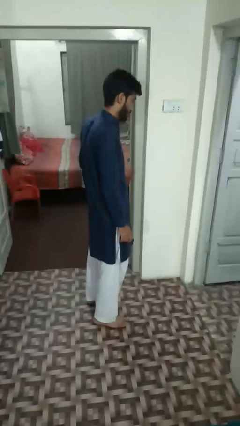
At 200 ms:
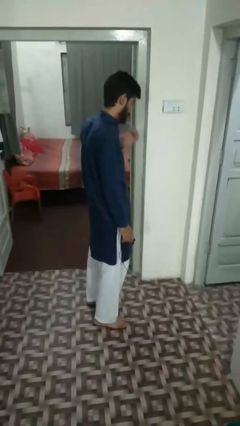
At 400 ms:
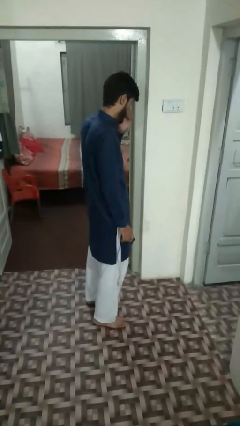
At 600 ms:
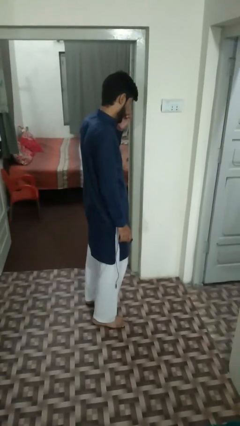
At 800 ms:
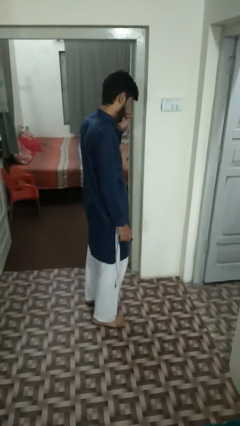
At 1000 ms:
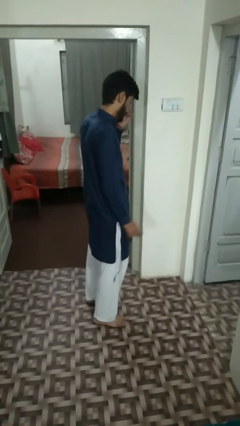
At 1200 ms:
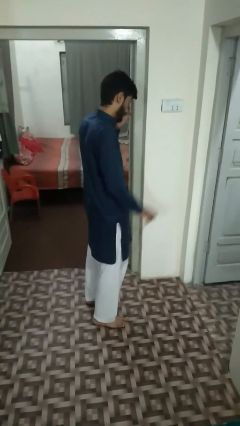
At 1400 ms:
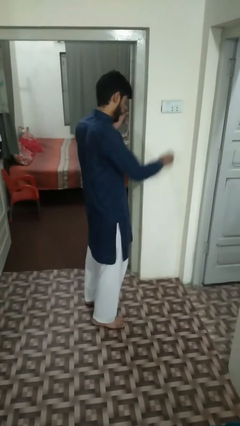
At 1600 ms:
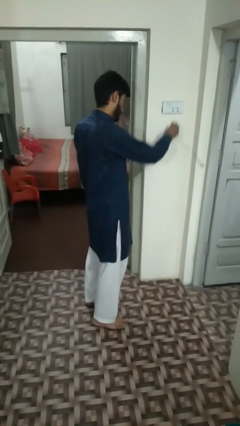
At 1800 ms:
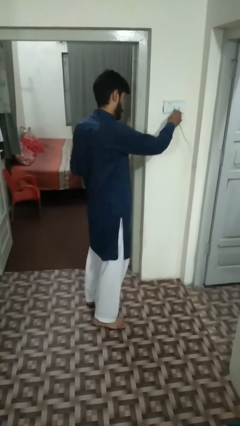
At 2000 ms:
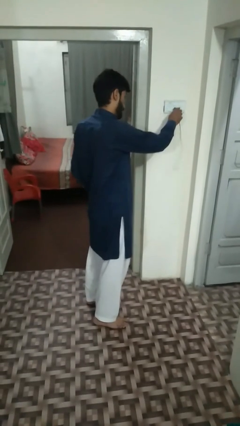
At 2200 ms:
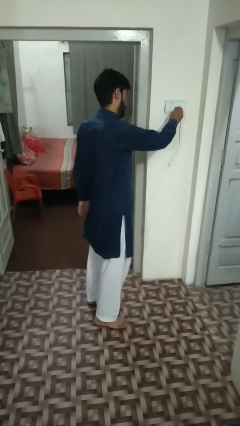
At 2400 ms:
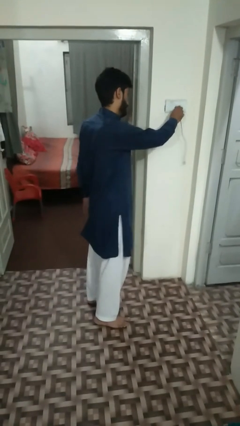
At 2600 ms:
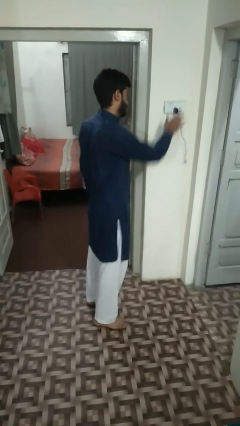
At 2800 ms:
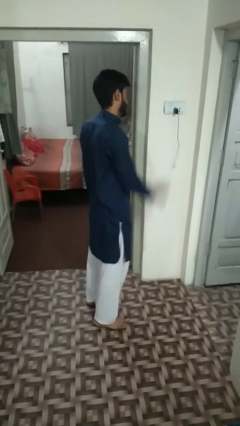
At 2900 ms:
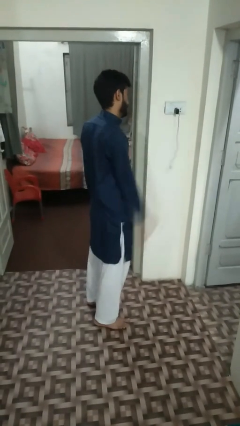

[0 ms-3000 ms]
person plugs into electrical socket

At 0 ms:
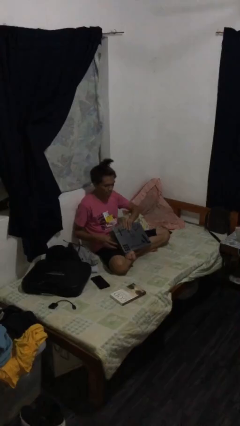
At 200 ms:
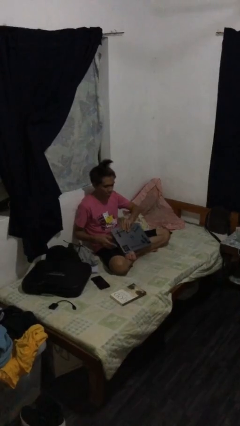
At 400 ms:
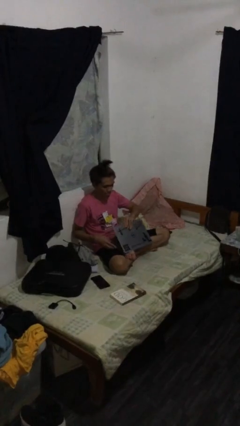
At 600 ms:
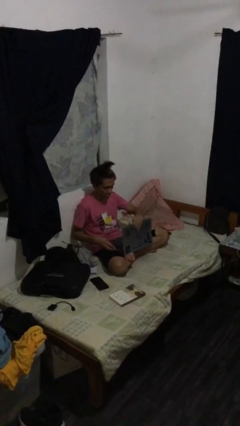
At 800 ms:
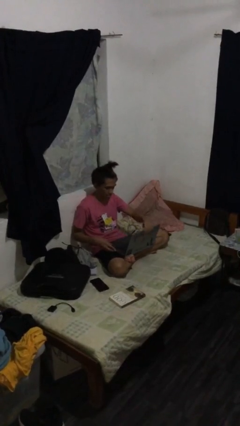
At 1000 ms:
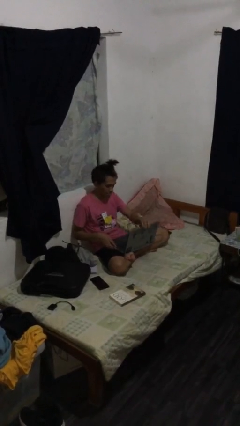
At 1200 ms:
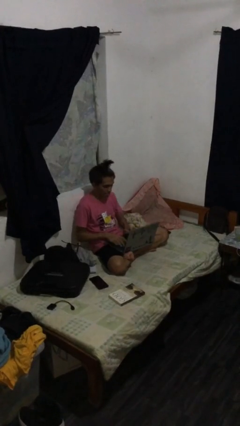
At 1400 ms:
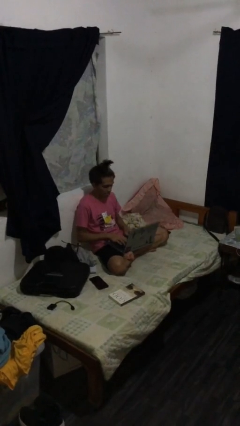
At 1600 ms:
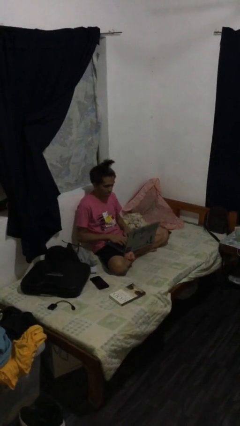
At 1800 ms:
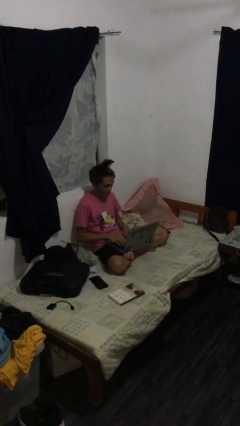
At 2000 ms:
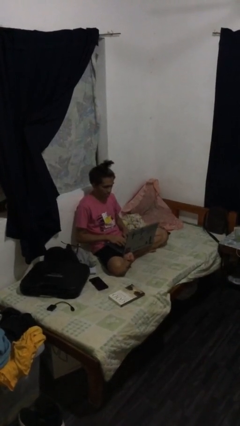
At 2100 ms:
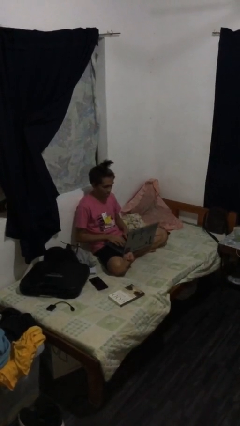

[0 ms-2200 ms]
person interacts with laptop

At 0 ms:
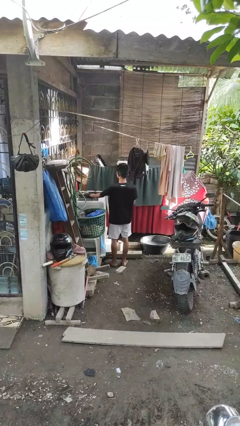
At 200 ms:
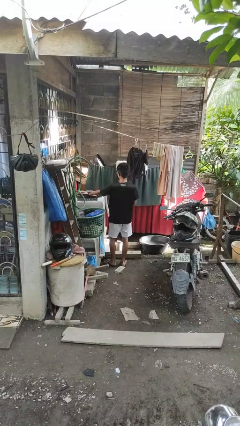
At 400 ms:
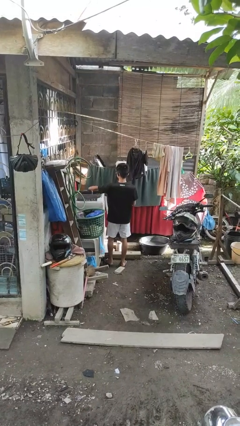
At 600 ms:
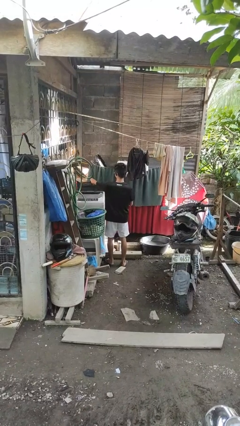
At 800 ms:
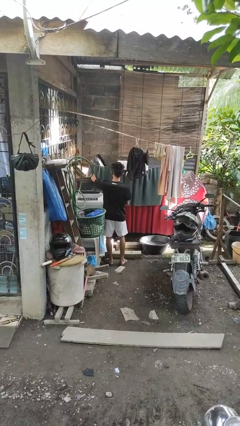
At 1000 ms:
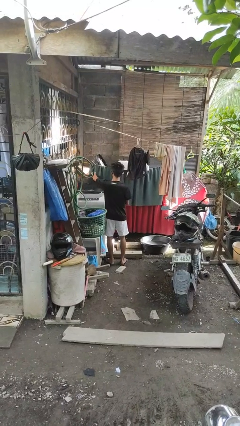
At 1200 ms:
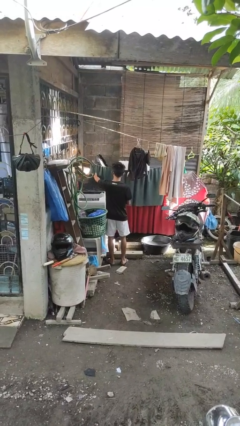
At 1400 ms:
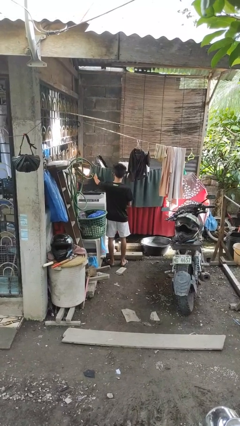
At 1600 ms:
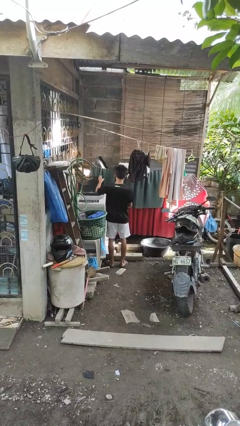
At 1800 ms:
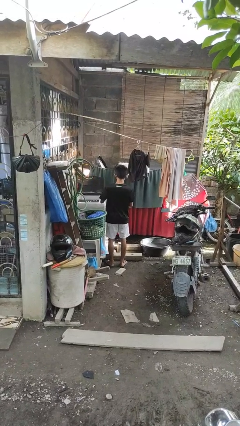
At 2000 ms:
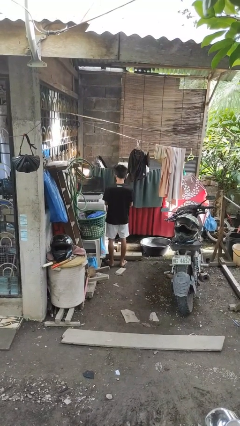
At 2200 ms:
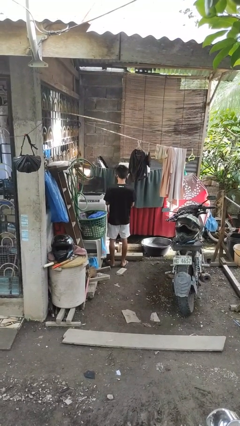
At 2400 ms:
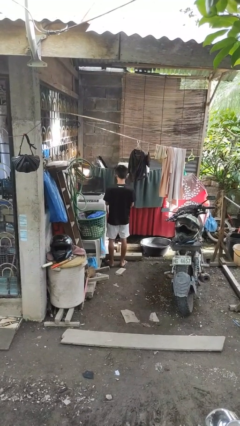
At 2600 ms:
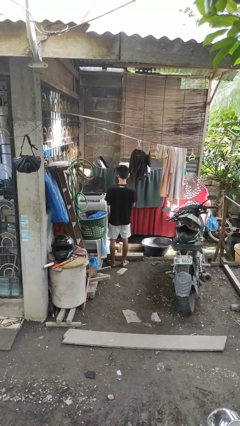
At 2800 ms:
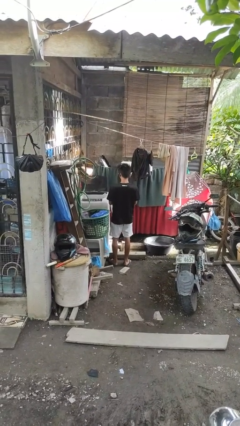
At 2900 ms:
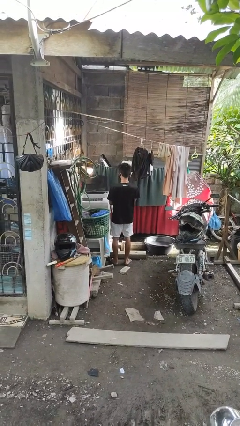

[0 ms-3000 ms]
person opens clothes washer

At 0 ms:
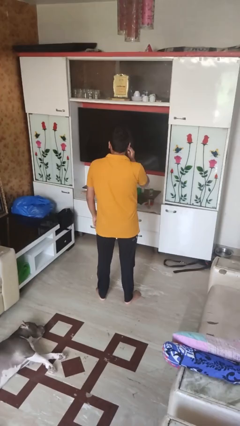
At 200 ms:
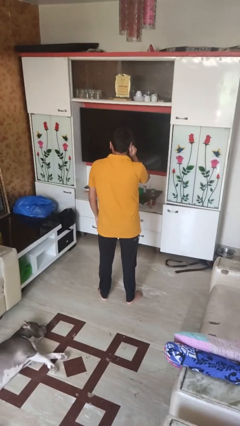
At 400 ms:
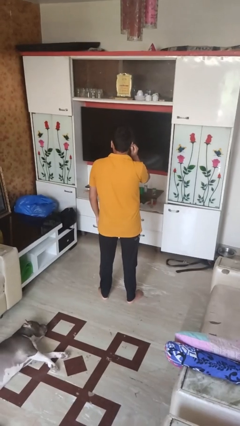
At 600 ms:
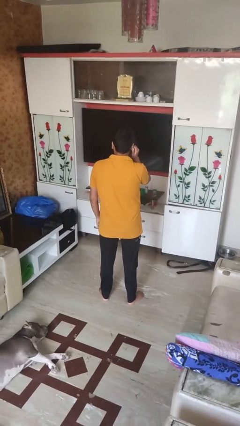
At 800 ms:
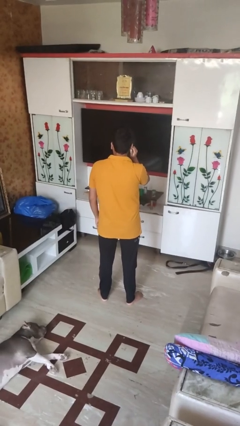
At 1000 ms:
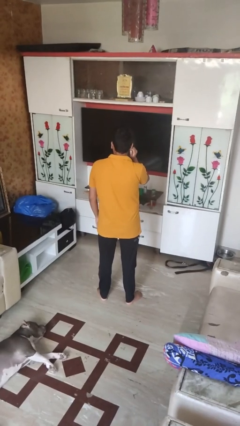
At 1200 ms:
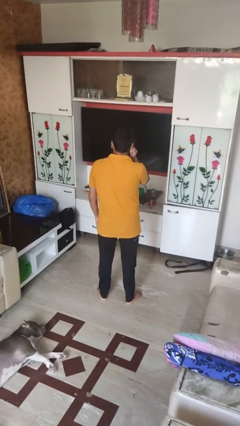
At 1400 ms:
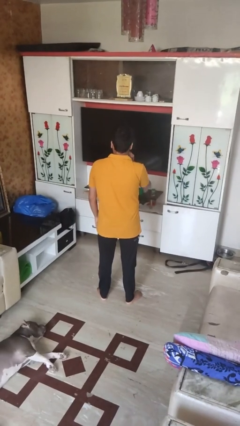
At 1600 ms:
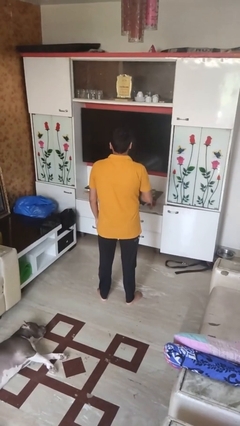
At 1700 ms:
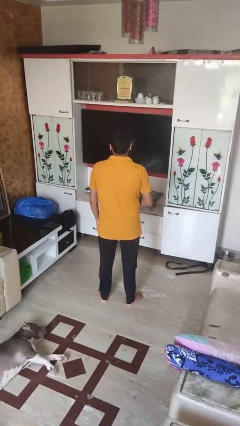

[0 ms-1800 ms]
person touches earlobe

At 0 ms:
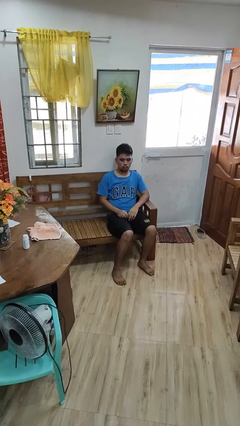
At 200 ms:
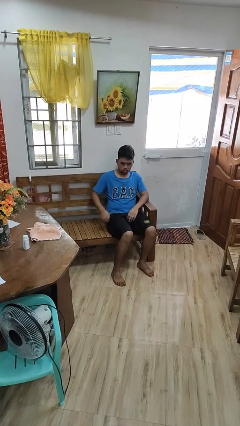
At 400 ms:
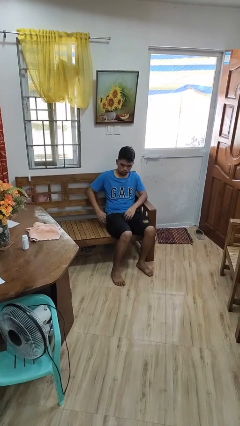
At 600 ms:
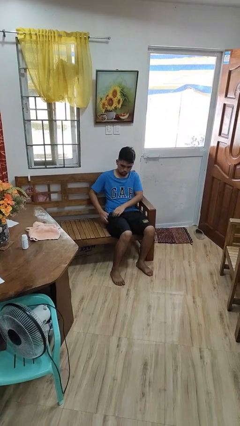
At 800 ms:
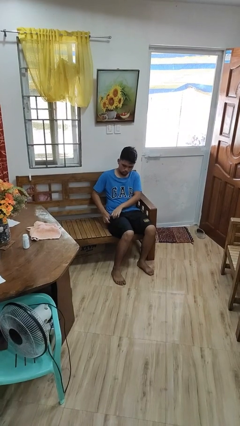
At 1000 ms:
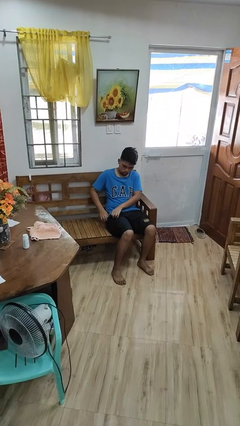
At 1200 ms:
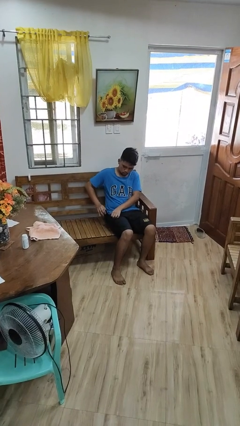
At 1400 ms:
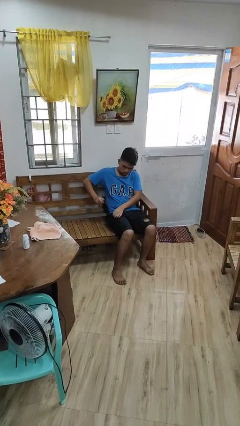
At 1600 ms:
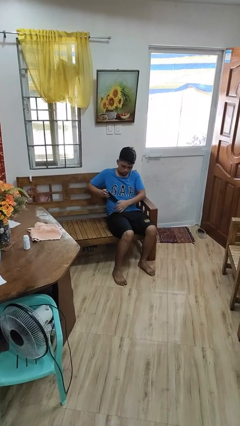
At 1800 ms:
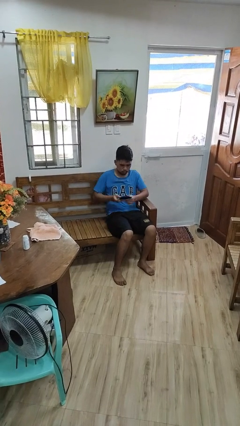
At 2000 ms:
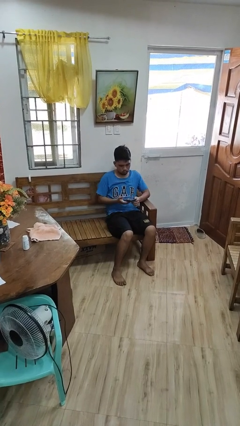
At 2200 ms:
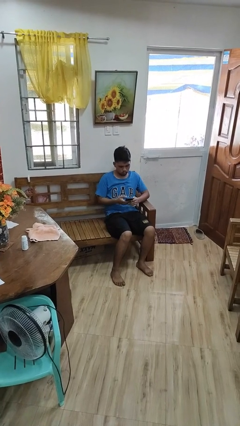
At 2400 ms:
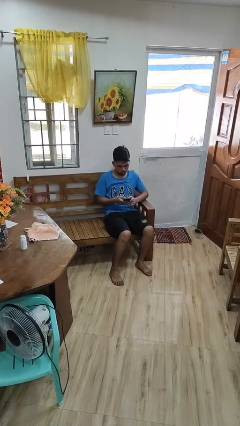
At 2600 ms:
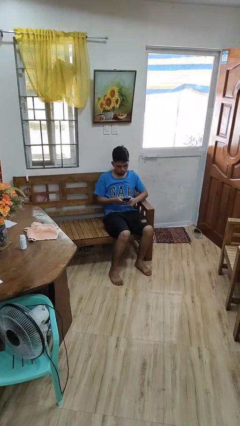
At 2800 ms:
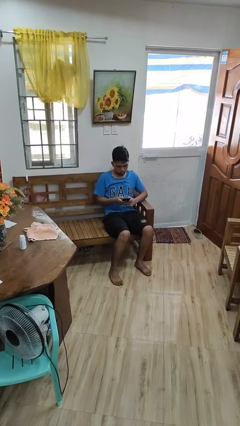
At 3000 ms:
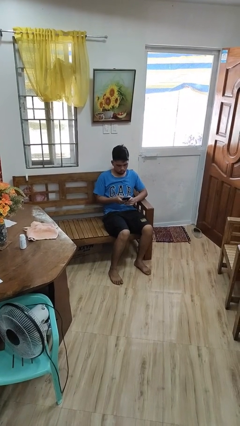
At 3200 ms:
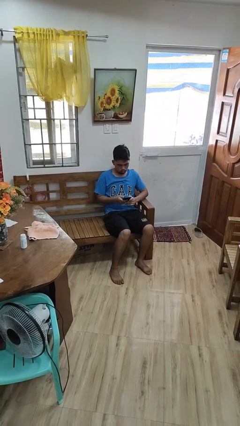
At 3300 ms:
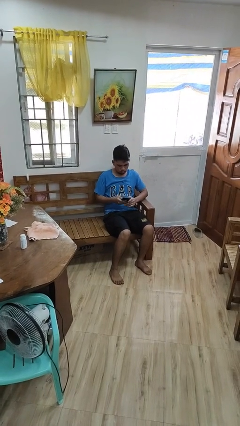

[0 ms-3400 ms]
person takes phone from pocket

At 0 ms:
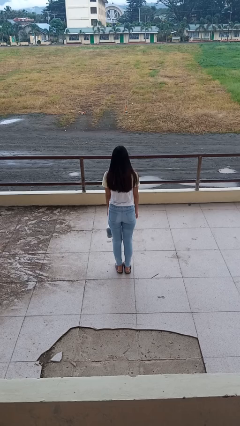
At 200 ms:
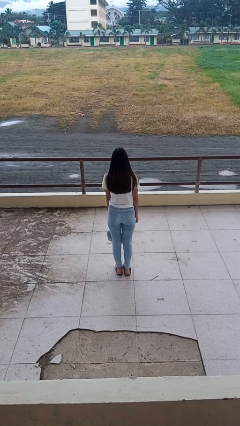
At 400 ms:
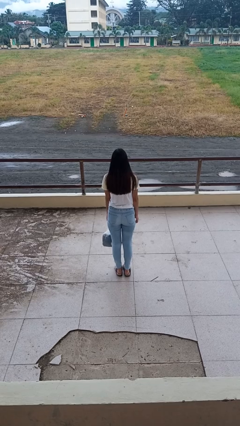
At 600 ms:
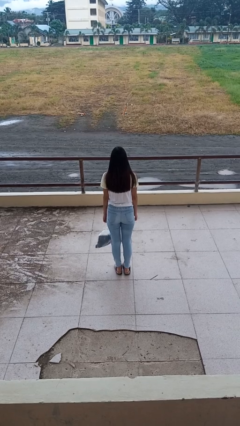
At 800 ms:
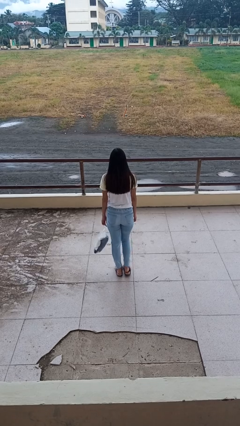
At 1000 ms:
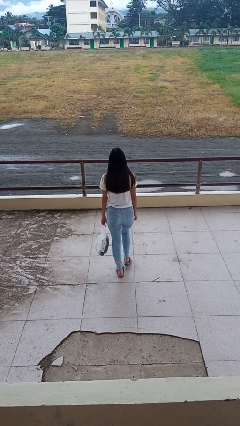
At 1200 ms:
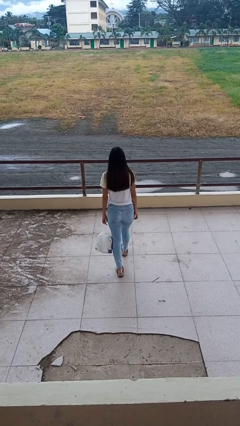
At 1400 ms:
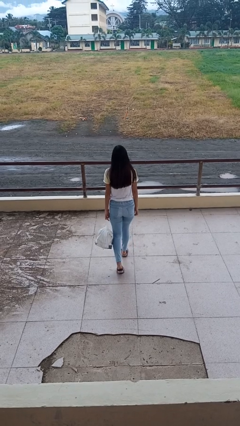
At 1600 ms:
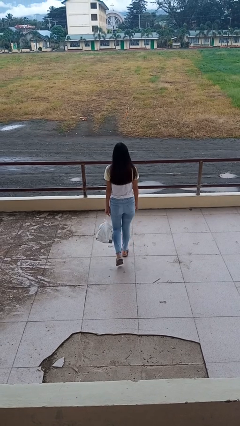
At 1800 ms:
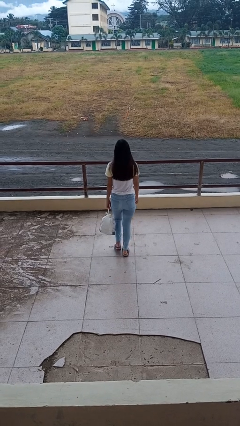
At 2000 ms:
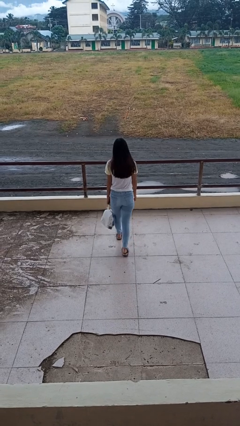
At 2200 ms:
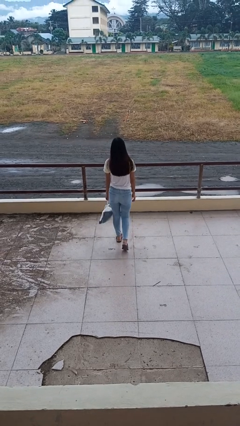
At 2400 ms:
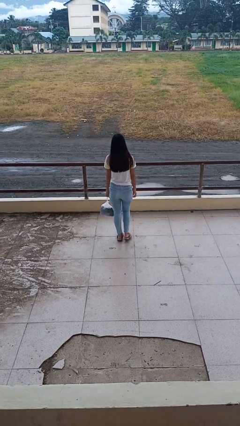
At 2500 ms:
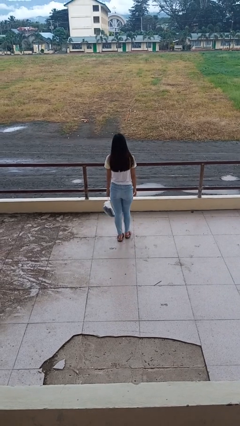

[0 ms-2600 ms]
person carries groceries

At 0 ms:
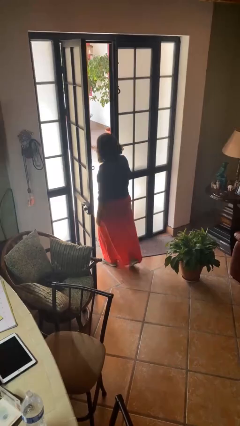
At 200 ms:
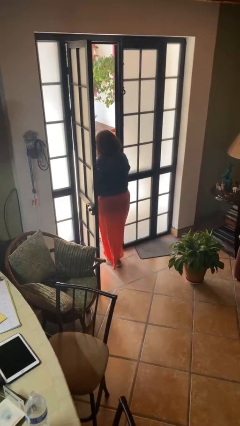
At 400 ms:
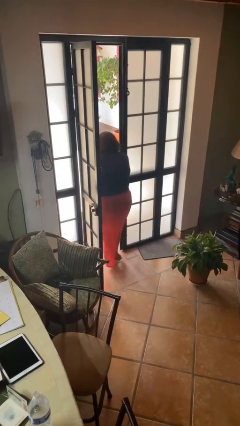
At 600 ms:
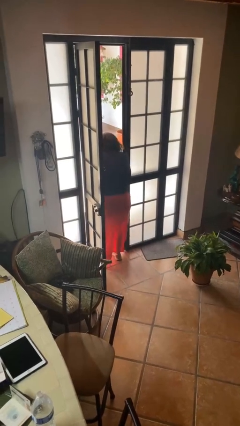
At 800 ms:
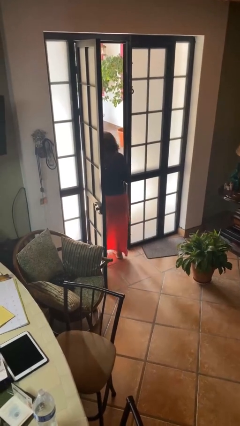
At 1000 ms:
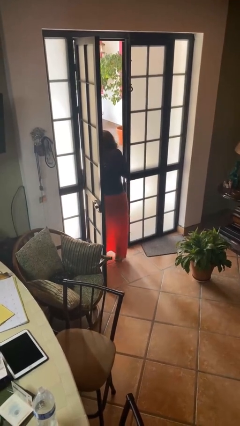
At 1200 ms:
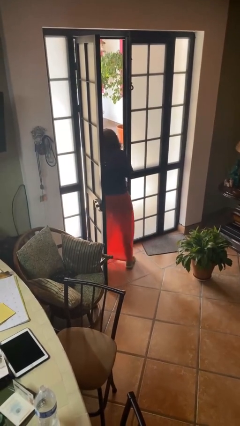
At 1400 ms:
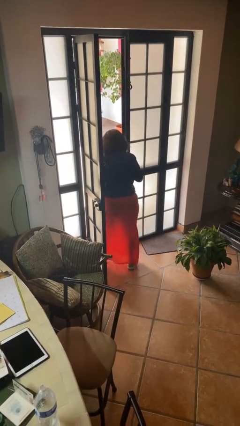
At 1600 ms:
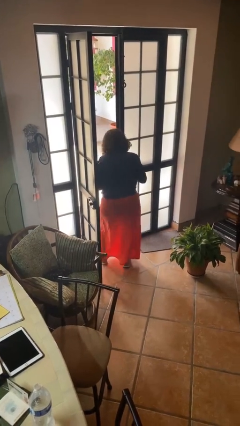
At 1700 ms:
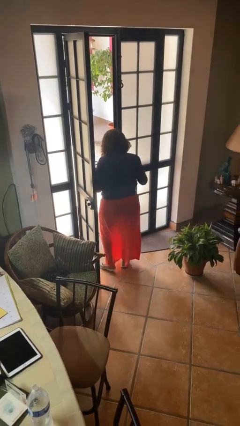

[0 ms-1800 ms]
person bumps into wall
